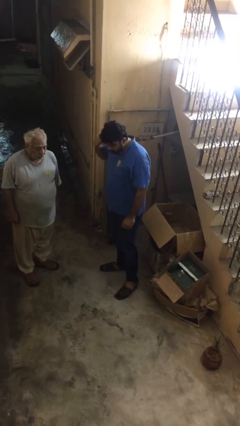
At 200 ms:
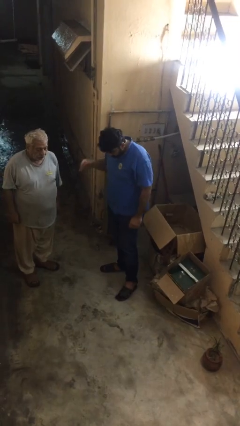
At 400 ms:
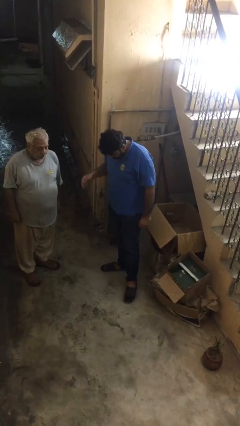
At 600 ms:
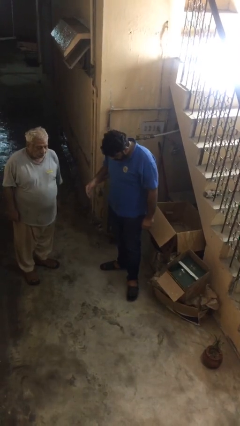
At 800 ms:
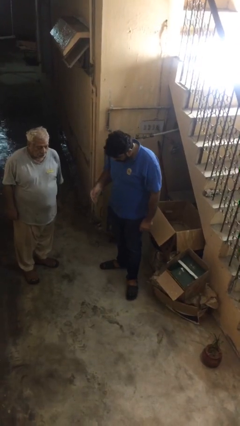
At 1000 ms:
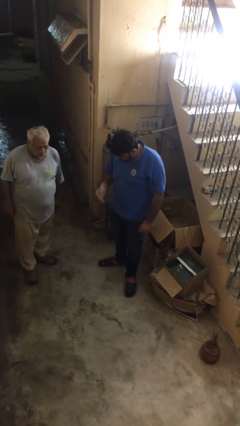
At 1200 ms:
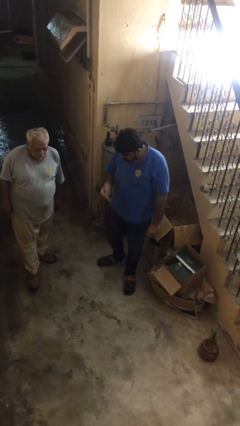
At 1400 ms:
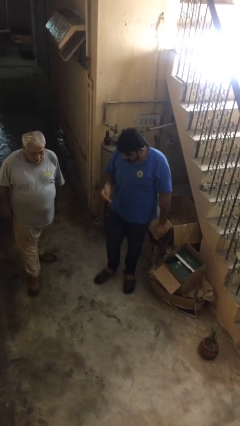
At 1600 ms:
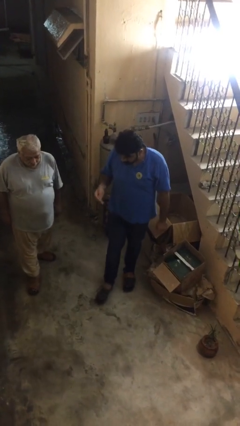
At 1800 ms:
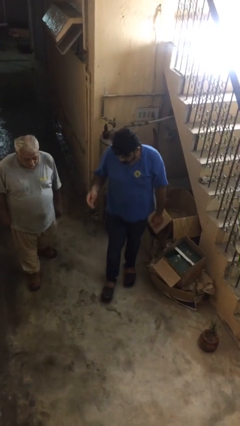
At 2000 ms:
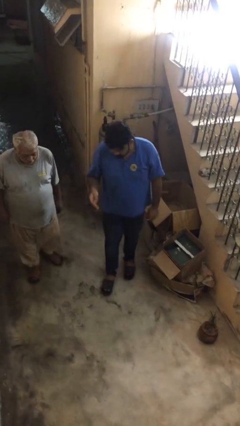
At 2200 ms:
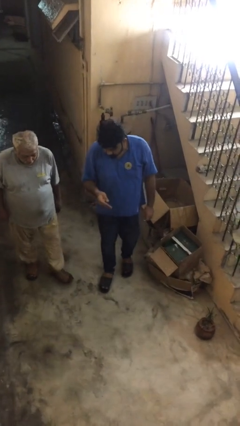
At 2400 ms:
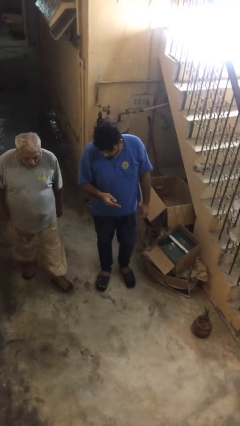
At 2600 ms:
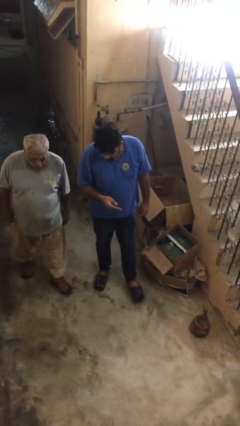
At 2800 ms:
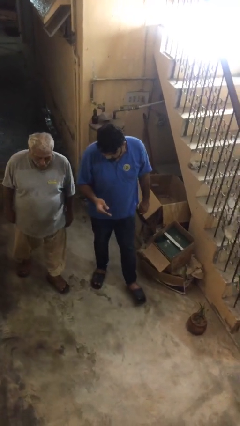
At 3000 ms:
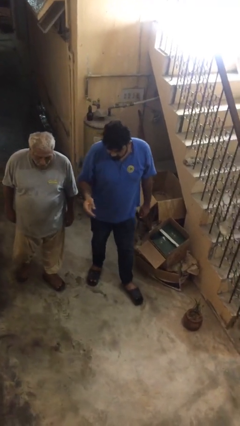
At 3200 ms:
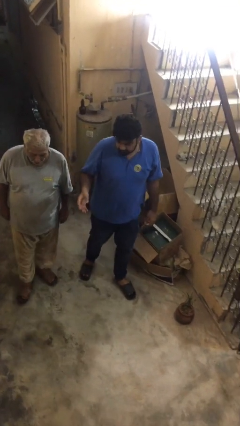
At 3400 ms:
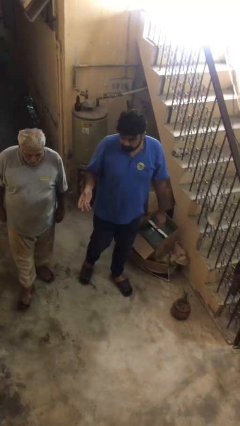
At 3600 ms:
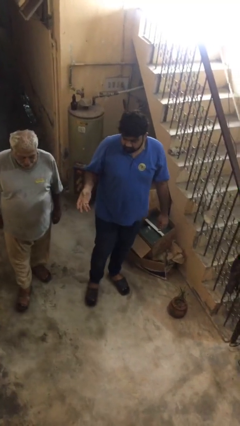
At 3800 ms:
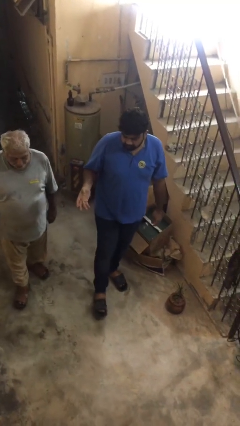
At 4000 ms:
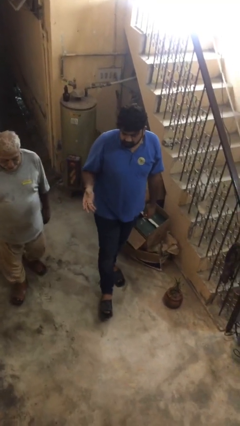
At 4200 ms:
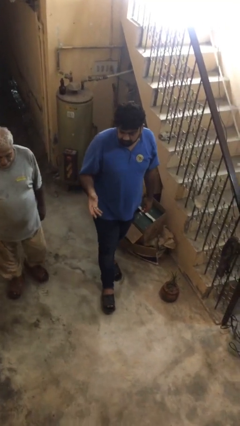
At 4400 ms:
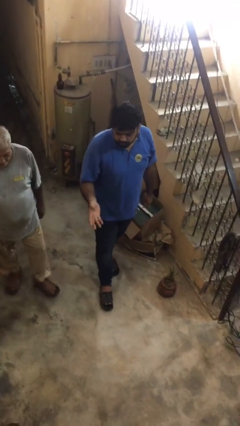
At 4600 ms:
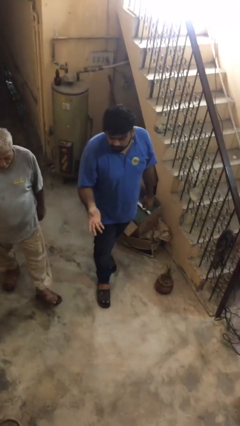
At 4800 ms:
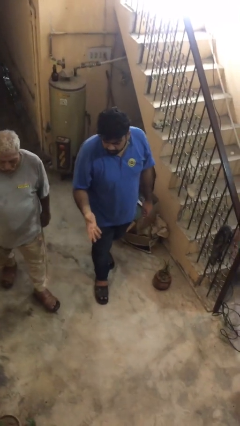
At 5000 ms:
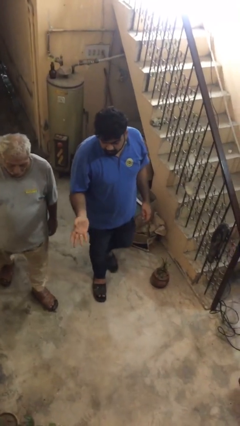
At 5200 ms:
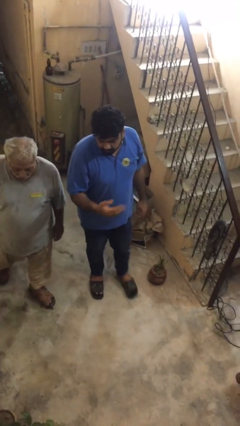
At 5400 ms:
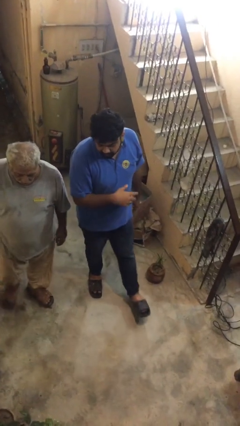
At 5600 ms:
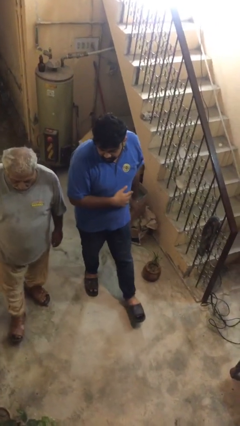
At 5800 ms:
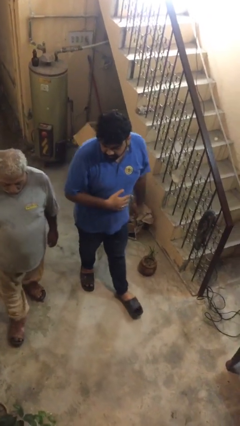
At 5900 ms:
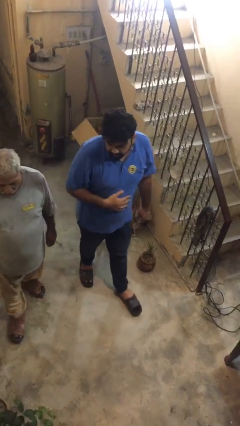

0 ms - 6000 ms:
person talks to person

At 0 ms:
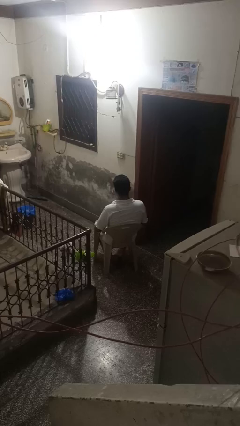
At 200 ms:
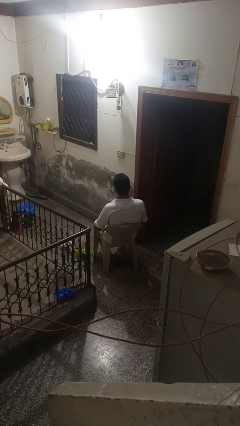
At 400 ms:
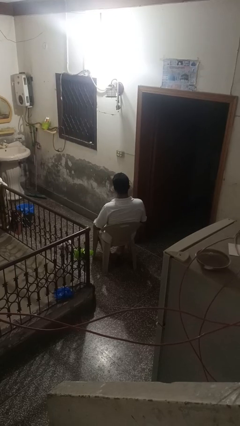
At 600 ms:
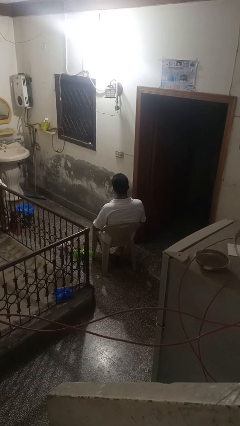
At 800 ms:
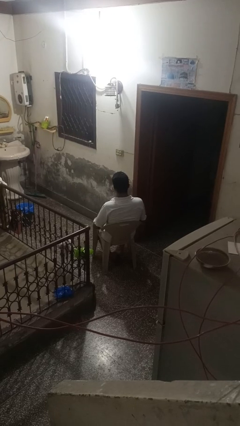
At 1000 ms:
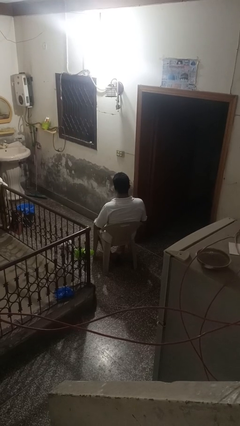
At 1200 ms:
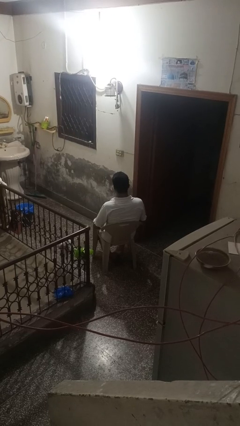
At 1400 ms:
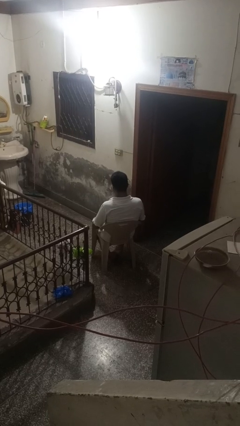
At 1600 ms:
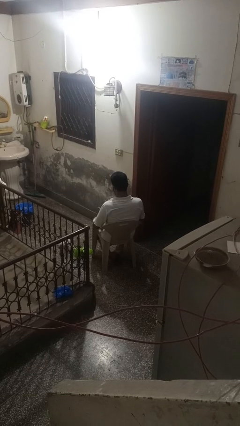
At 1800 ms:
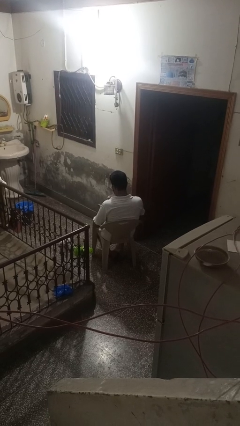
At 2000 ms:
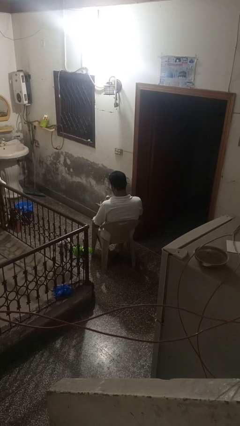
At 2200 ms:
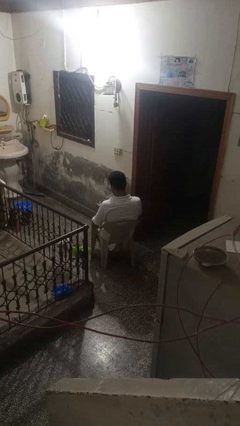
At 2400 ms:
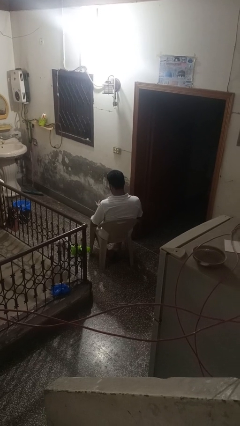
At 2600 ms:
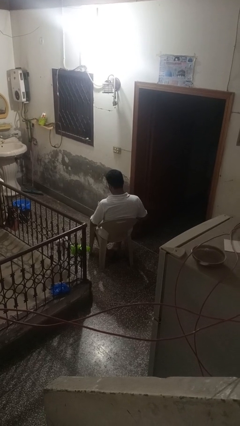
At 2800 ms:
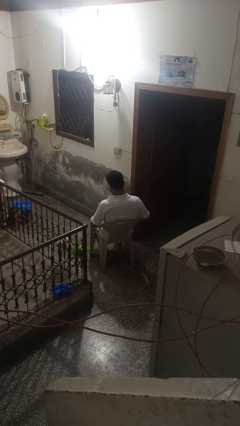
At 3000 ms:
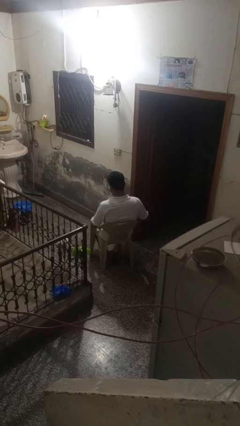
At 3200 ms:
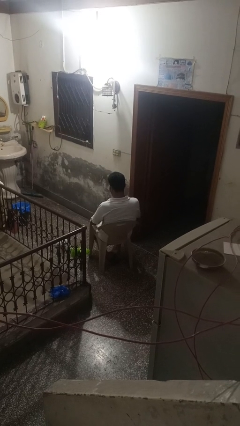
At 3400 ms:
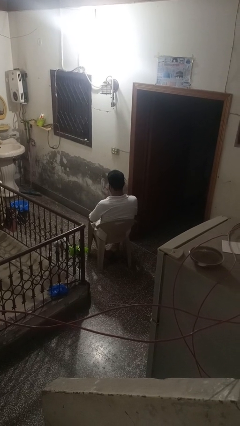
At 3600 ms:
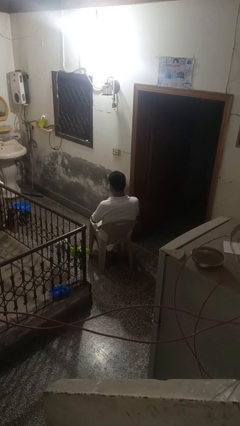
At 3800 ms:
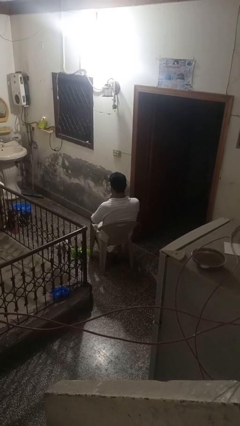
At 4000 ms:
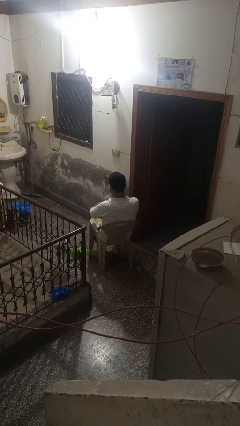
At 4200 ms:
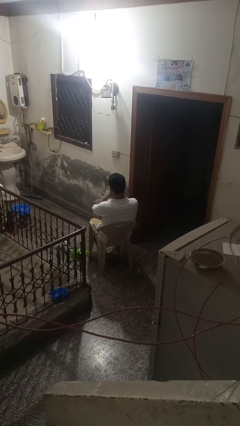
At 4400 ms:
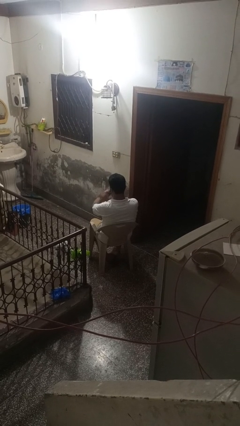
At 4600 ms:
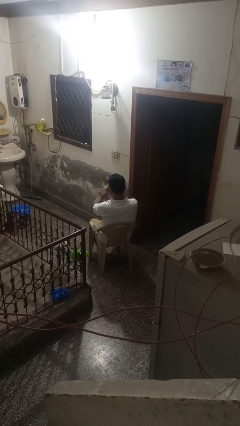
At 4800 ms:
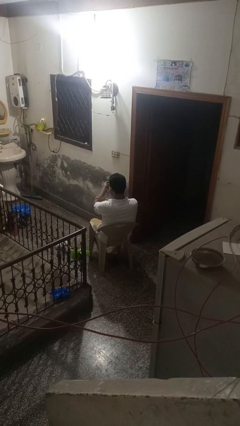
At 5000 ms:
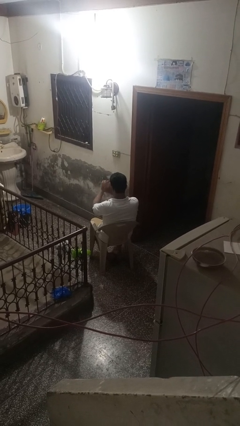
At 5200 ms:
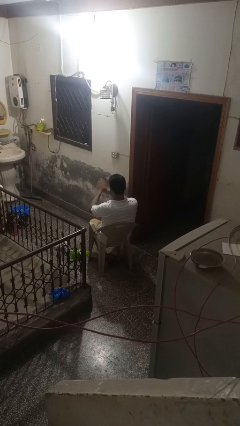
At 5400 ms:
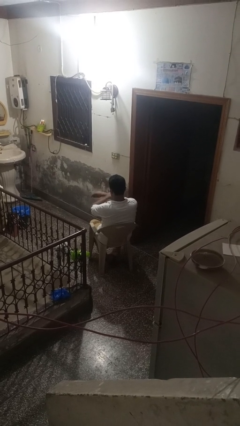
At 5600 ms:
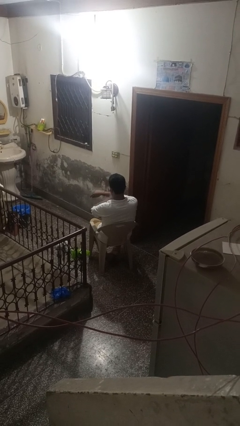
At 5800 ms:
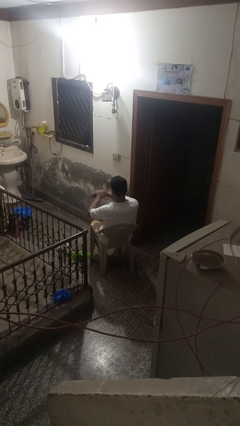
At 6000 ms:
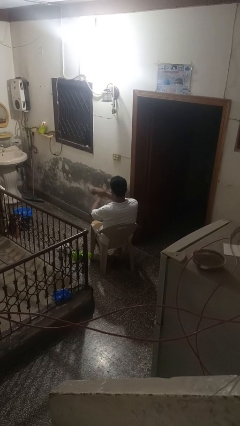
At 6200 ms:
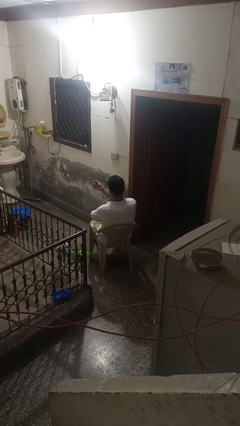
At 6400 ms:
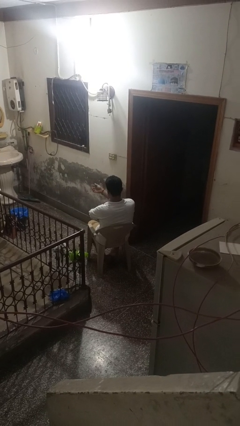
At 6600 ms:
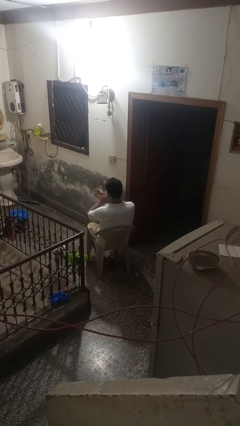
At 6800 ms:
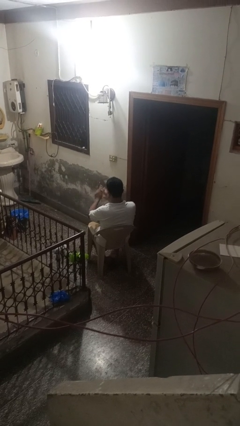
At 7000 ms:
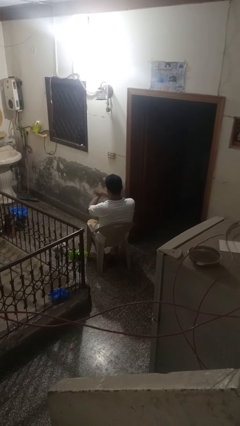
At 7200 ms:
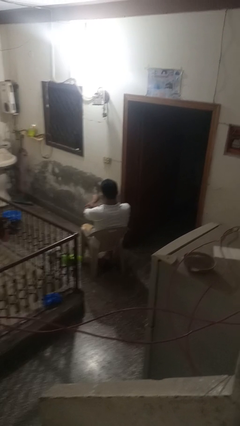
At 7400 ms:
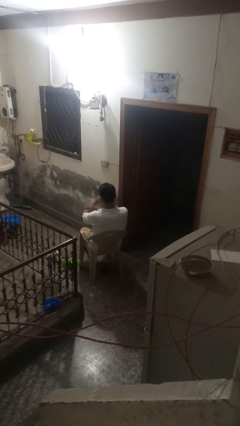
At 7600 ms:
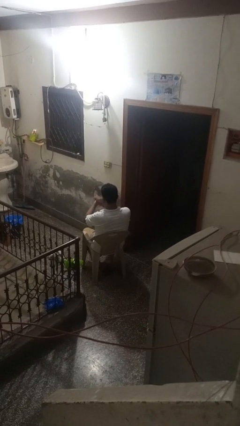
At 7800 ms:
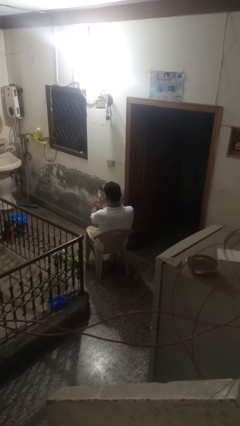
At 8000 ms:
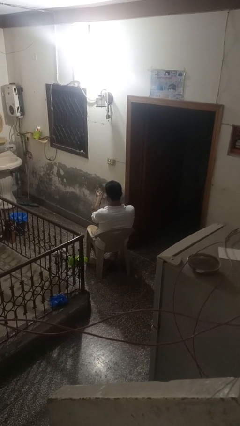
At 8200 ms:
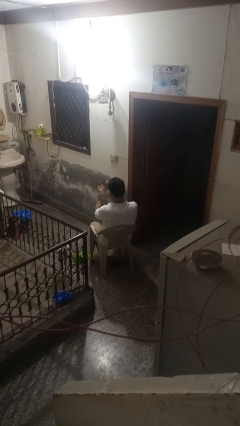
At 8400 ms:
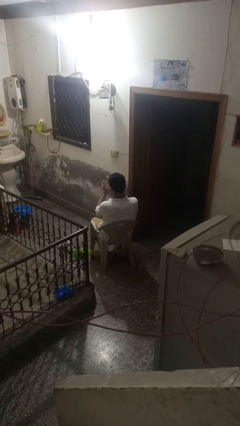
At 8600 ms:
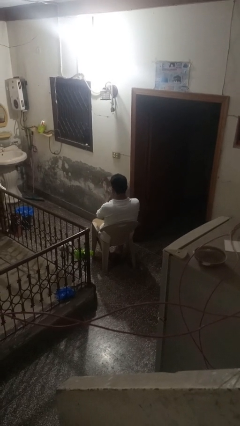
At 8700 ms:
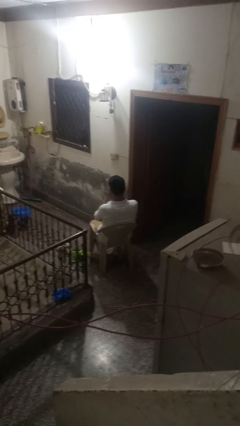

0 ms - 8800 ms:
person applies sunscreen

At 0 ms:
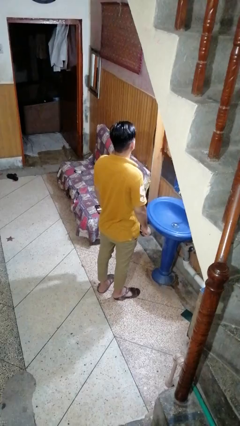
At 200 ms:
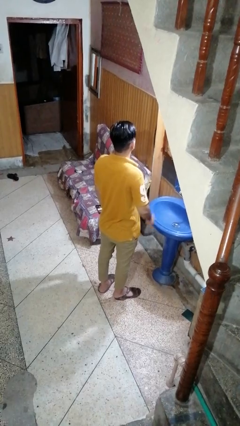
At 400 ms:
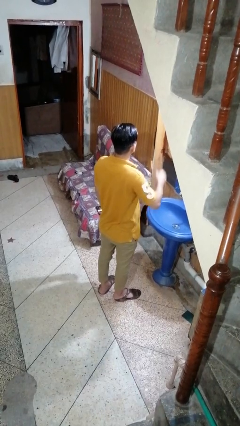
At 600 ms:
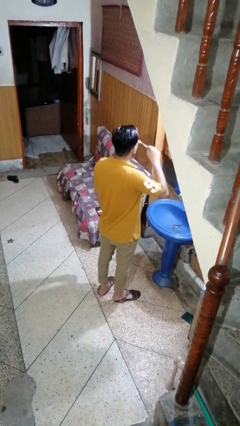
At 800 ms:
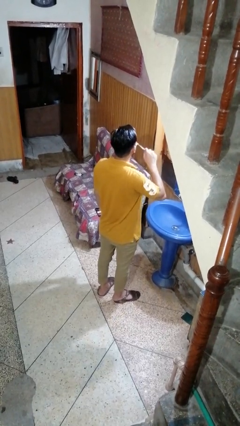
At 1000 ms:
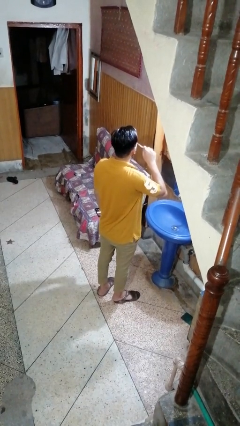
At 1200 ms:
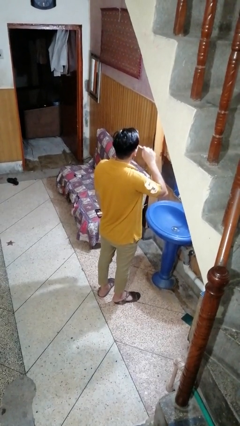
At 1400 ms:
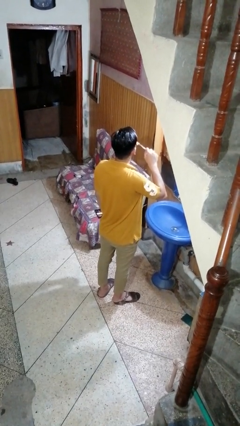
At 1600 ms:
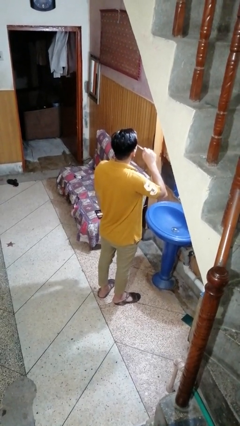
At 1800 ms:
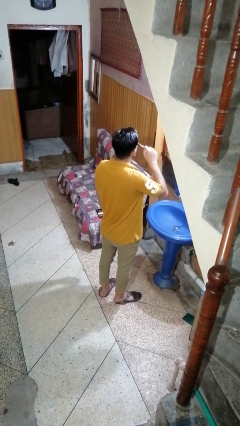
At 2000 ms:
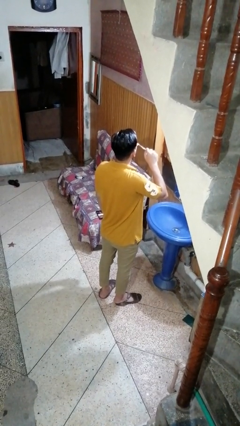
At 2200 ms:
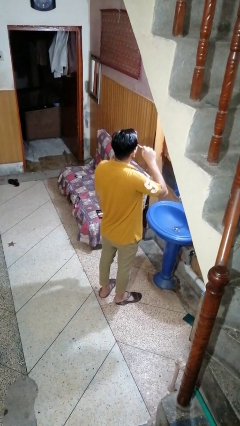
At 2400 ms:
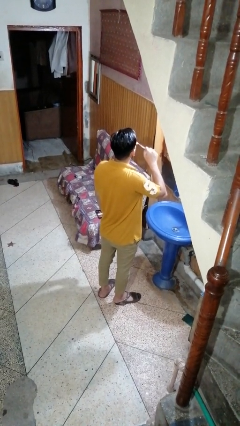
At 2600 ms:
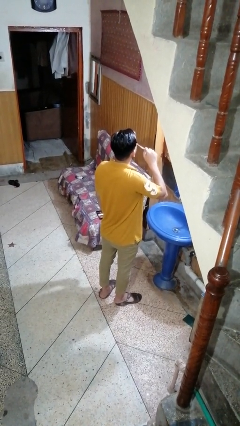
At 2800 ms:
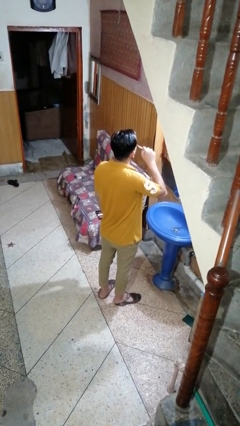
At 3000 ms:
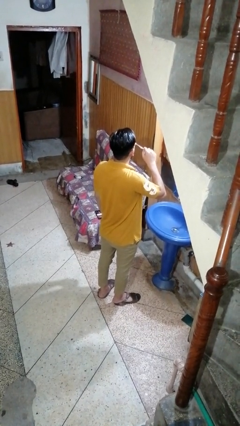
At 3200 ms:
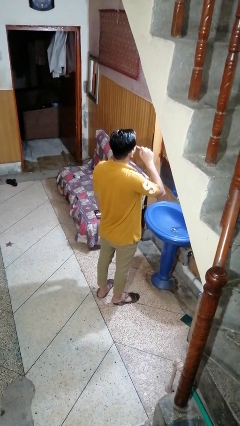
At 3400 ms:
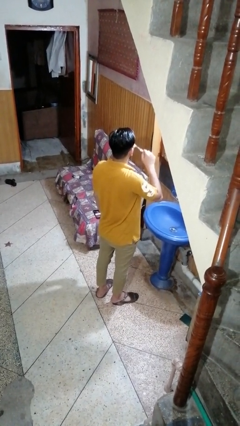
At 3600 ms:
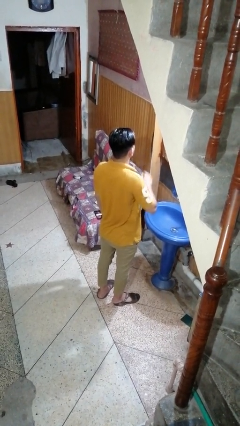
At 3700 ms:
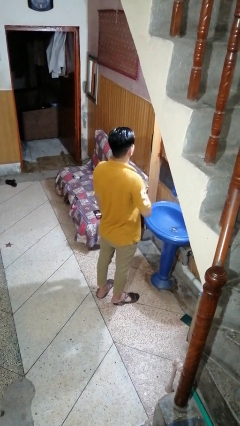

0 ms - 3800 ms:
person brushes teeth
